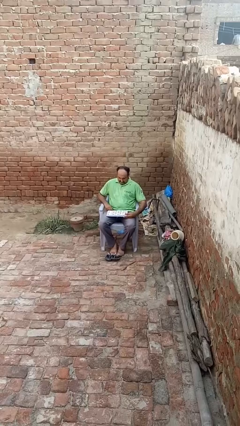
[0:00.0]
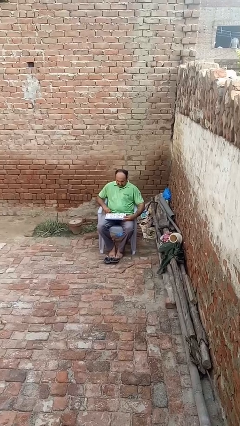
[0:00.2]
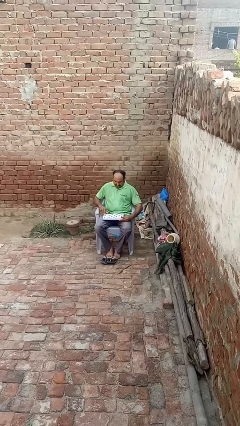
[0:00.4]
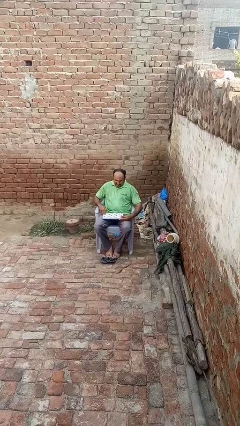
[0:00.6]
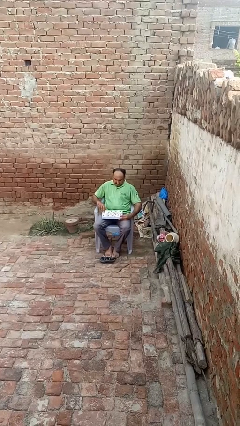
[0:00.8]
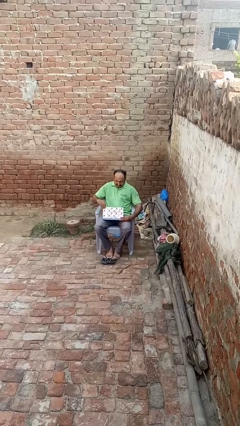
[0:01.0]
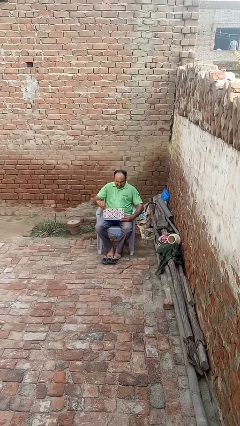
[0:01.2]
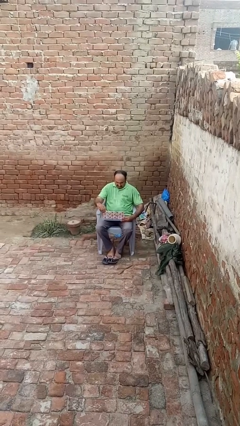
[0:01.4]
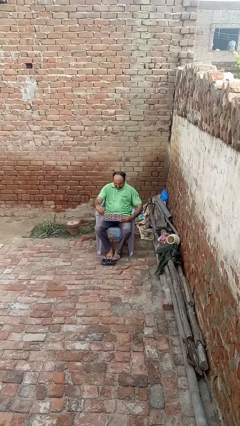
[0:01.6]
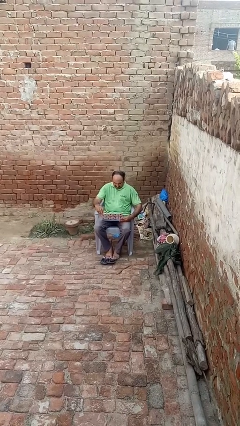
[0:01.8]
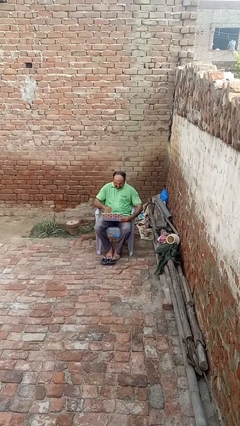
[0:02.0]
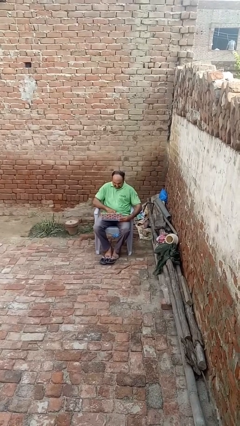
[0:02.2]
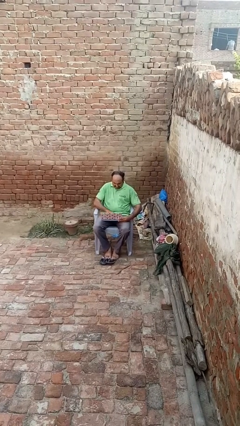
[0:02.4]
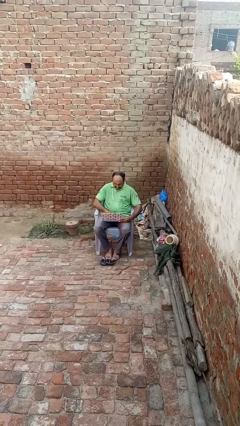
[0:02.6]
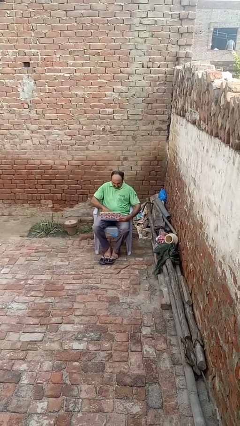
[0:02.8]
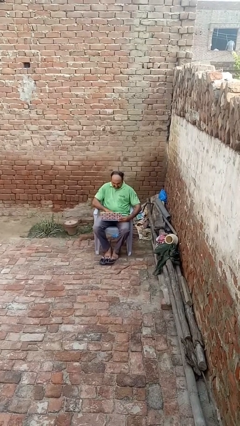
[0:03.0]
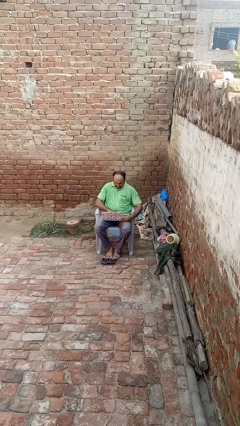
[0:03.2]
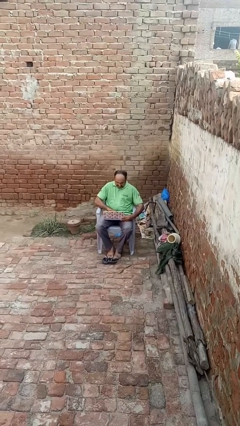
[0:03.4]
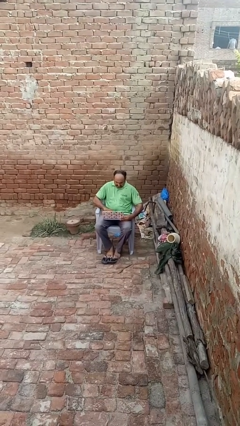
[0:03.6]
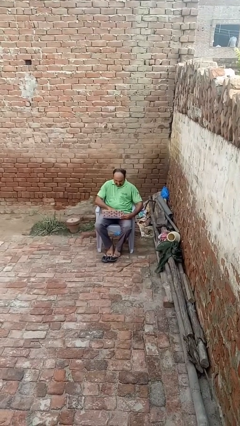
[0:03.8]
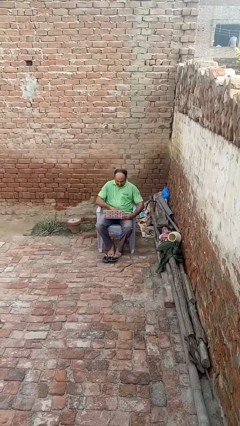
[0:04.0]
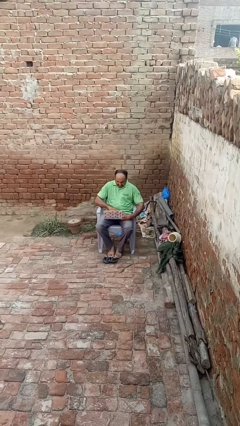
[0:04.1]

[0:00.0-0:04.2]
person opens laptop

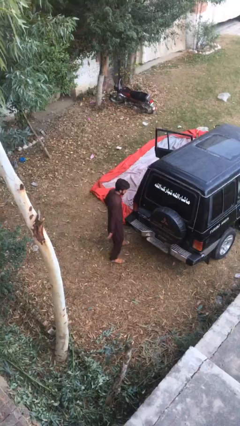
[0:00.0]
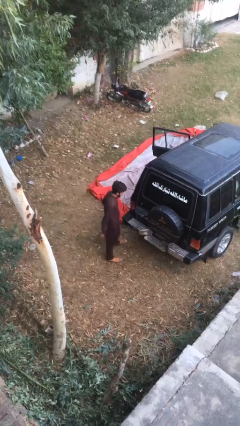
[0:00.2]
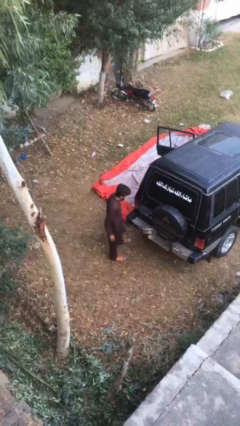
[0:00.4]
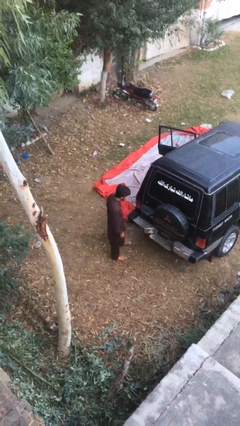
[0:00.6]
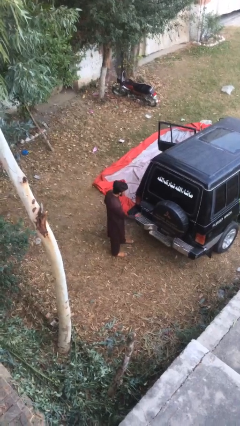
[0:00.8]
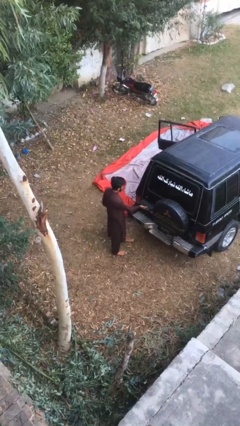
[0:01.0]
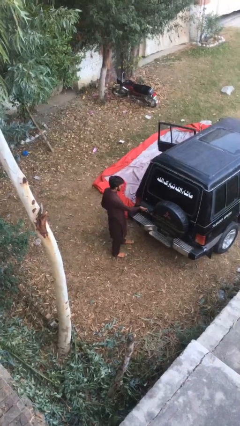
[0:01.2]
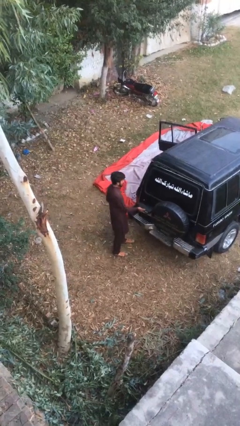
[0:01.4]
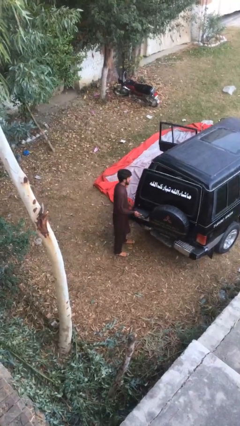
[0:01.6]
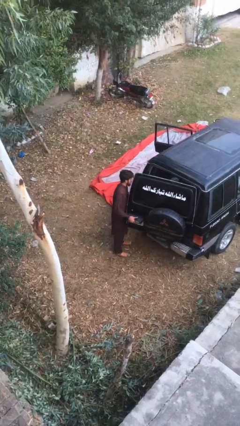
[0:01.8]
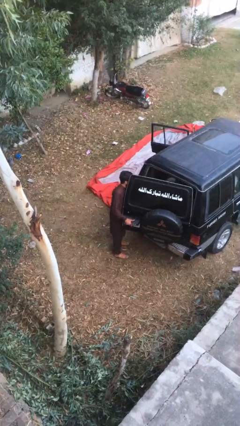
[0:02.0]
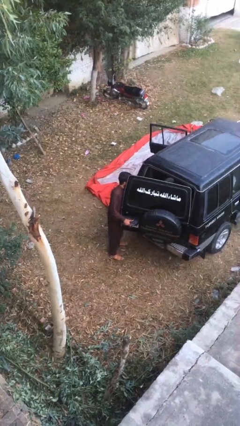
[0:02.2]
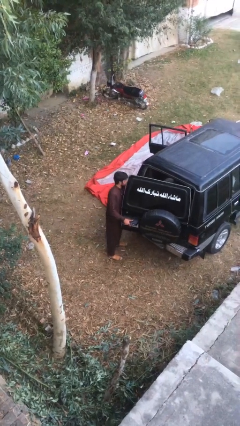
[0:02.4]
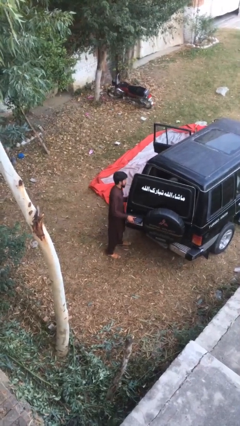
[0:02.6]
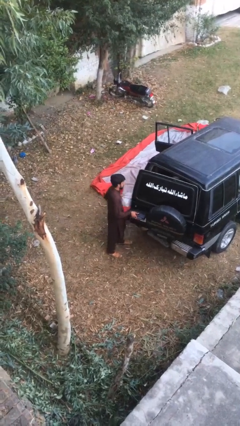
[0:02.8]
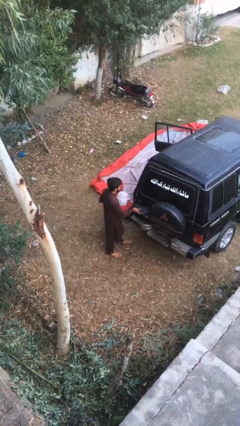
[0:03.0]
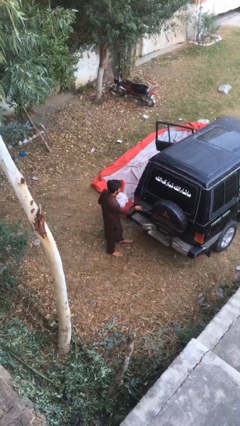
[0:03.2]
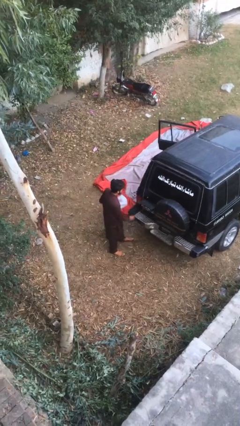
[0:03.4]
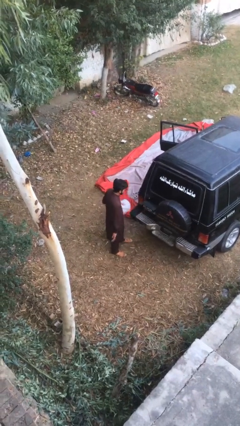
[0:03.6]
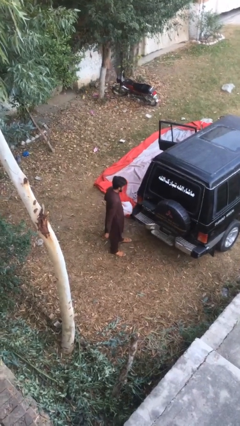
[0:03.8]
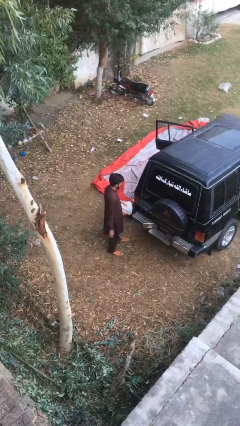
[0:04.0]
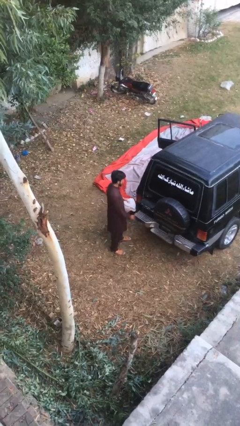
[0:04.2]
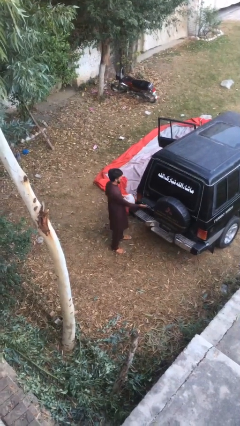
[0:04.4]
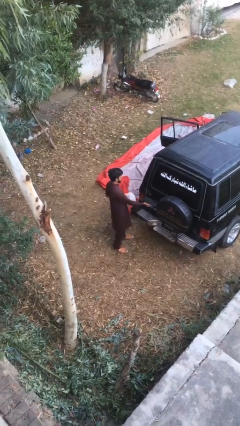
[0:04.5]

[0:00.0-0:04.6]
person unloads car

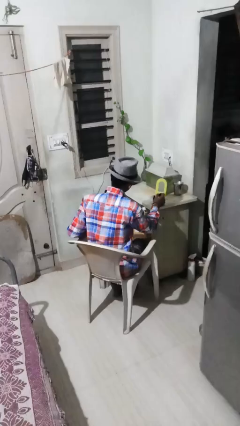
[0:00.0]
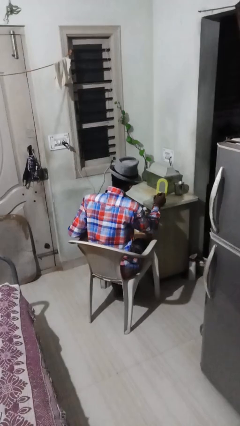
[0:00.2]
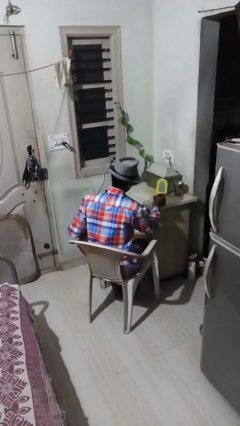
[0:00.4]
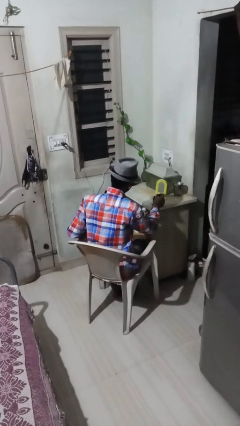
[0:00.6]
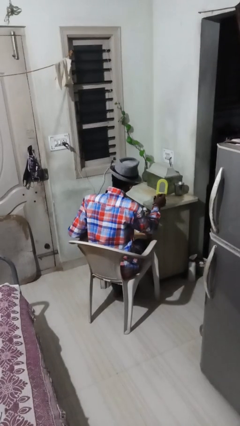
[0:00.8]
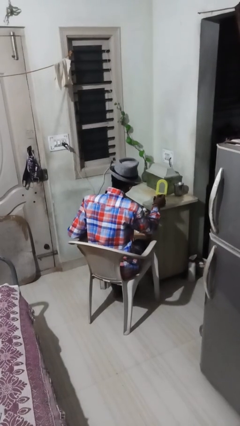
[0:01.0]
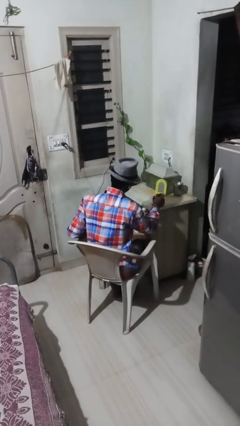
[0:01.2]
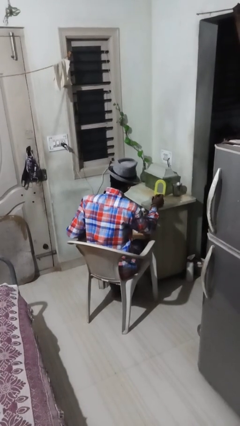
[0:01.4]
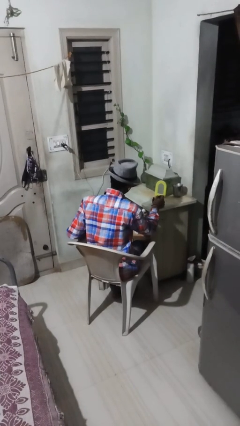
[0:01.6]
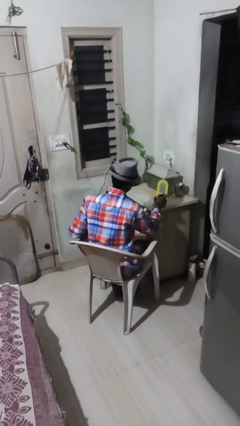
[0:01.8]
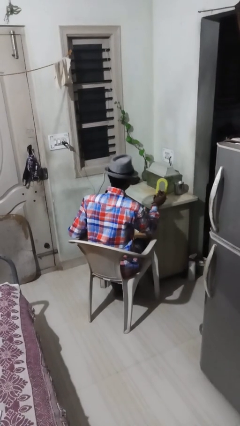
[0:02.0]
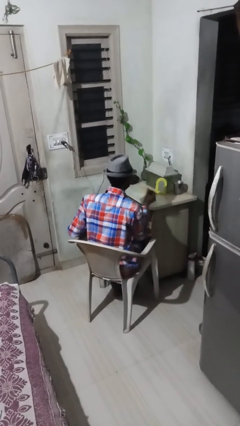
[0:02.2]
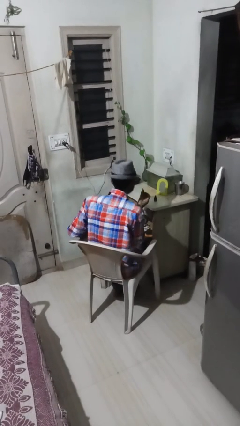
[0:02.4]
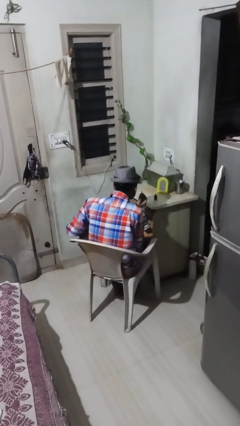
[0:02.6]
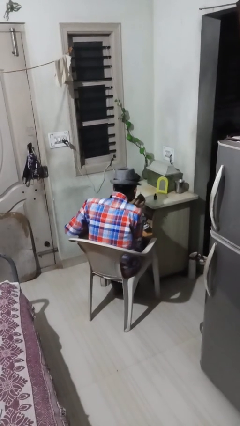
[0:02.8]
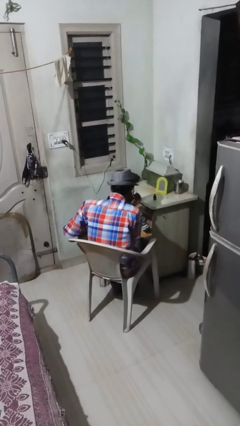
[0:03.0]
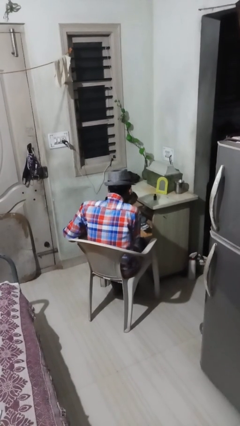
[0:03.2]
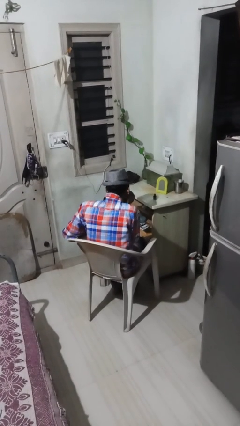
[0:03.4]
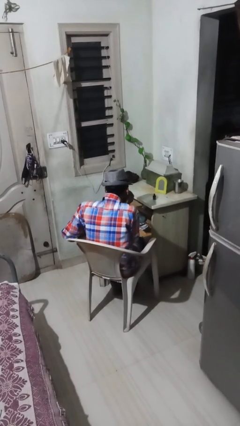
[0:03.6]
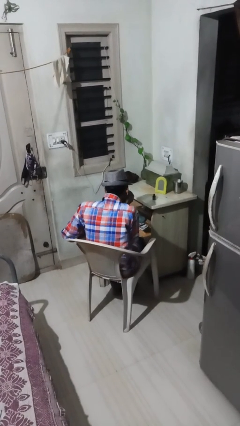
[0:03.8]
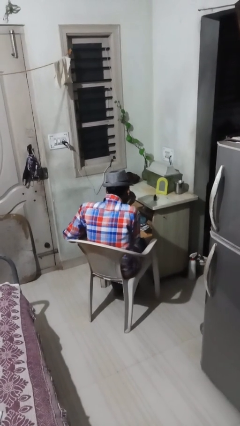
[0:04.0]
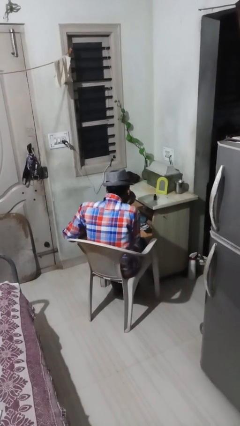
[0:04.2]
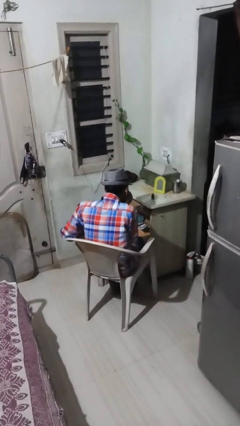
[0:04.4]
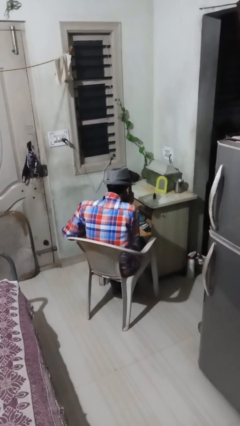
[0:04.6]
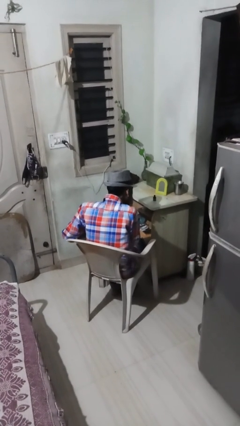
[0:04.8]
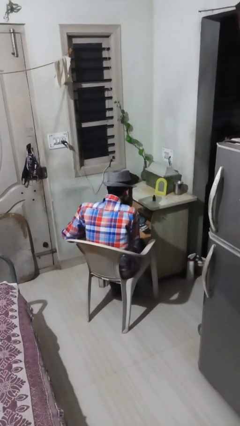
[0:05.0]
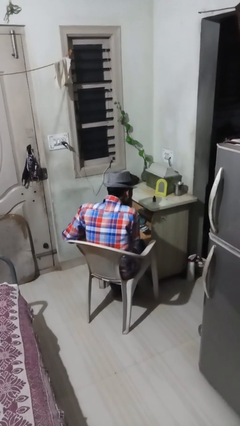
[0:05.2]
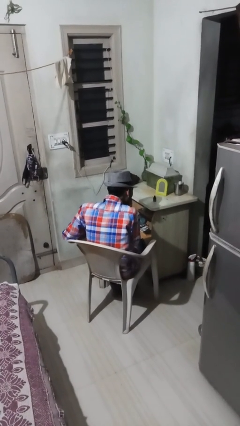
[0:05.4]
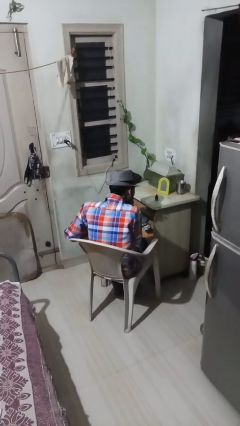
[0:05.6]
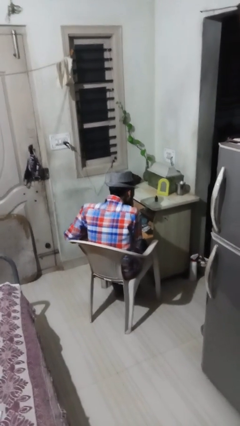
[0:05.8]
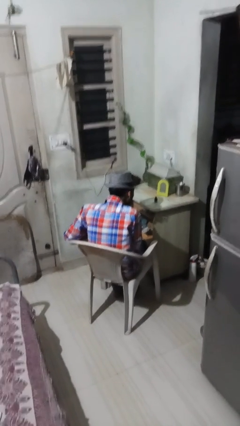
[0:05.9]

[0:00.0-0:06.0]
person applies eye makeup

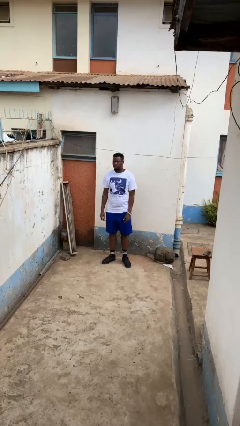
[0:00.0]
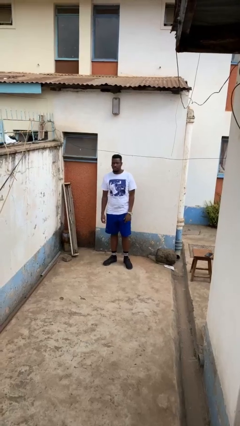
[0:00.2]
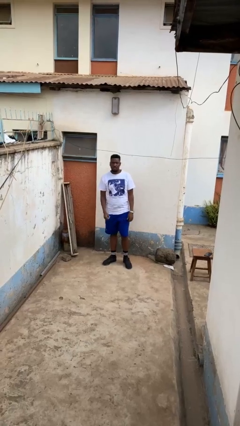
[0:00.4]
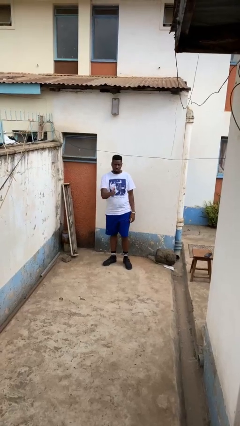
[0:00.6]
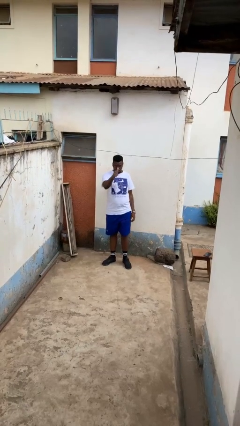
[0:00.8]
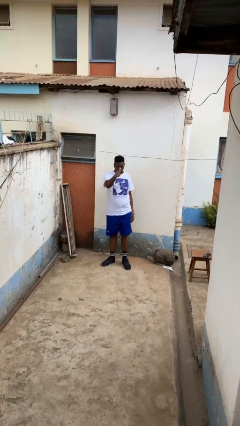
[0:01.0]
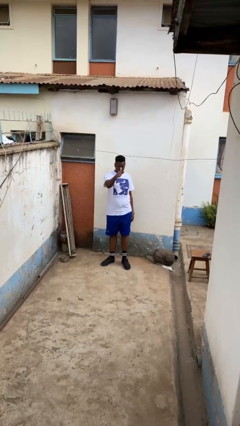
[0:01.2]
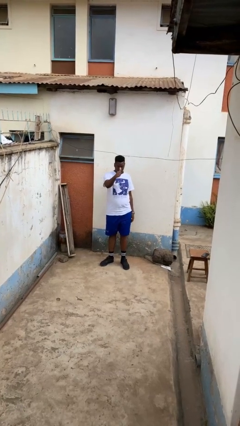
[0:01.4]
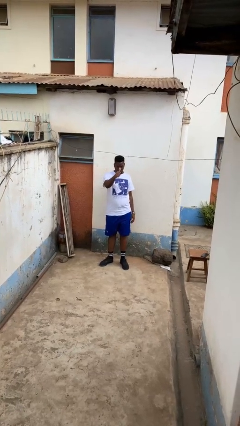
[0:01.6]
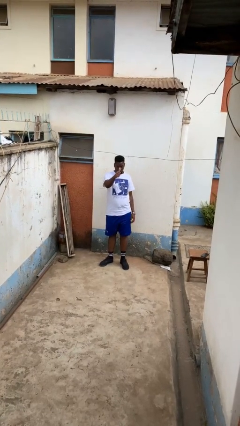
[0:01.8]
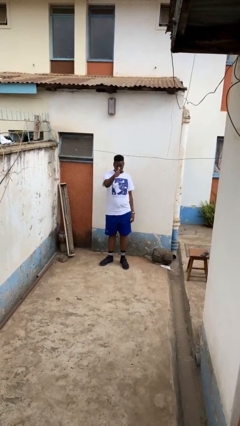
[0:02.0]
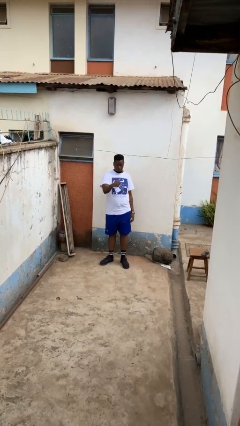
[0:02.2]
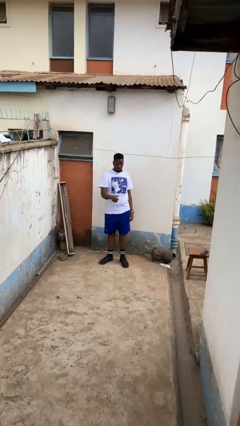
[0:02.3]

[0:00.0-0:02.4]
person gestures thumbs up

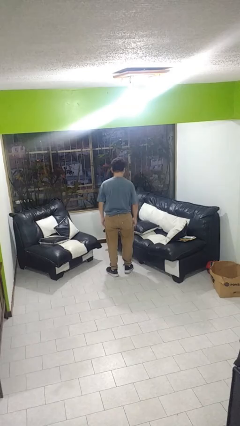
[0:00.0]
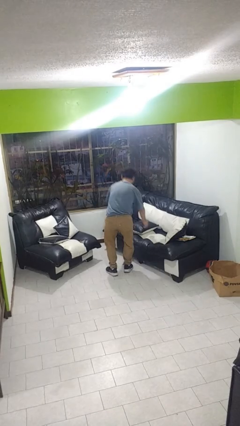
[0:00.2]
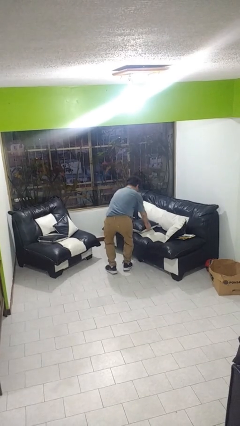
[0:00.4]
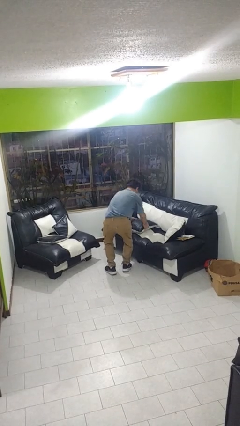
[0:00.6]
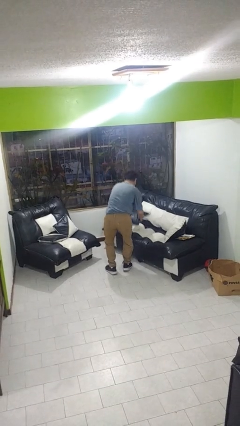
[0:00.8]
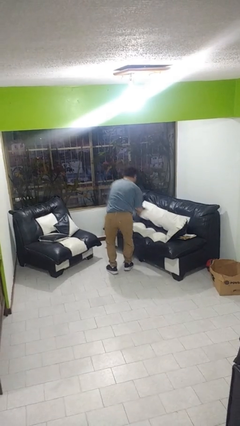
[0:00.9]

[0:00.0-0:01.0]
person picks up object from couch
